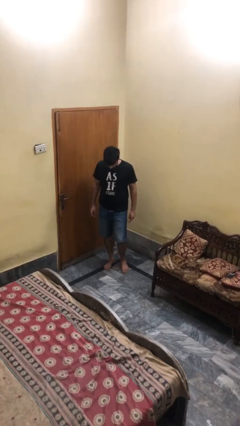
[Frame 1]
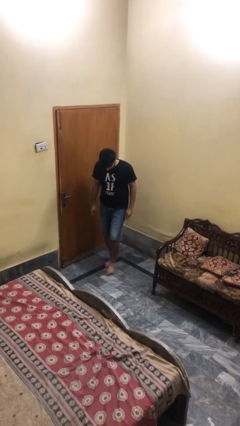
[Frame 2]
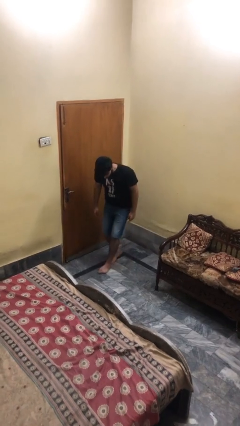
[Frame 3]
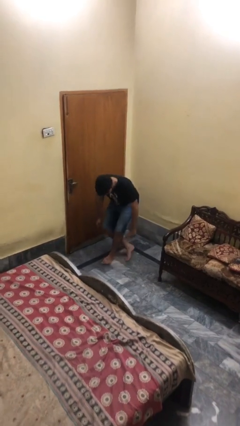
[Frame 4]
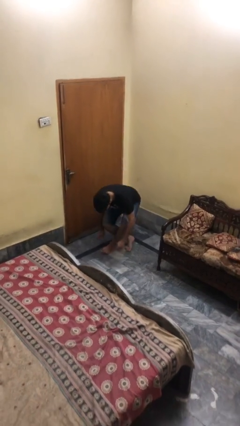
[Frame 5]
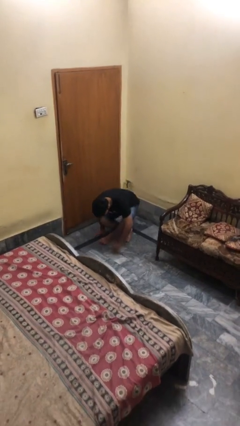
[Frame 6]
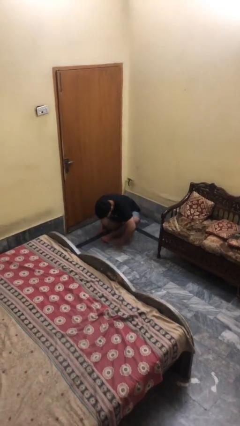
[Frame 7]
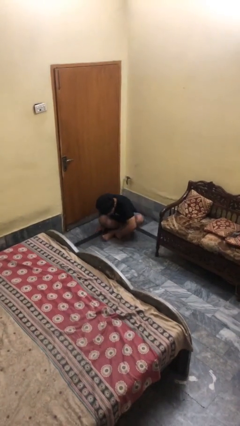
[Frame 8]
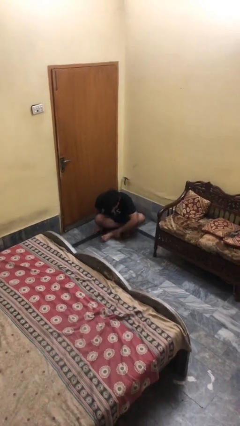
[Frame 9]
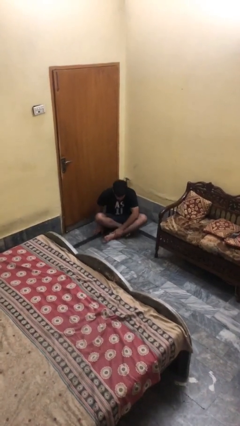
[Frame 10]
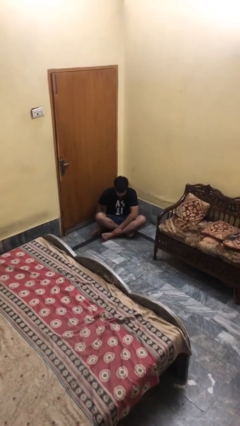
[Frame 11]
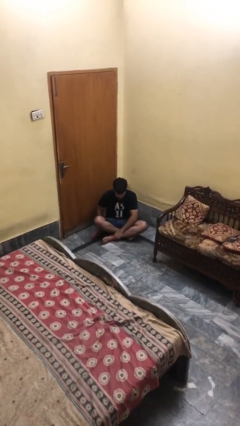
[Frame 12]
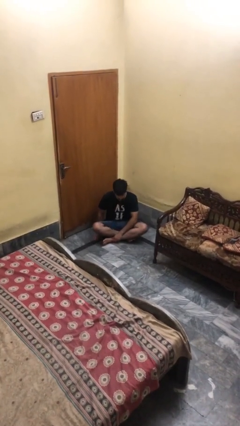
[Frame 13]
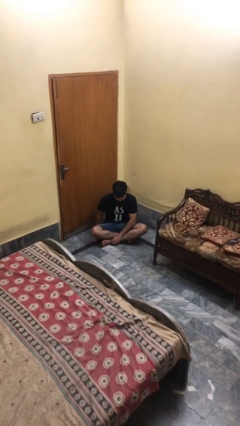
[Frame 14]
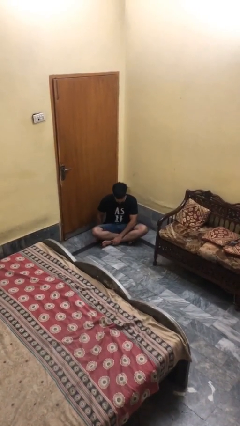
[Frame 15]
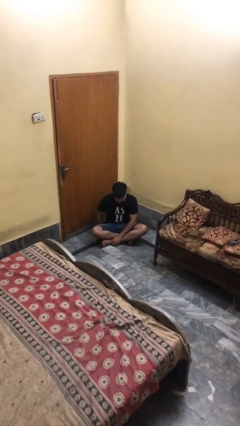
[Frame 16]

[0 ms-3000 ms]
person sits crisscross

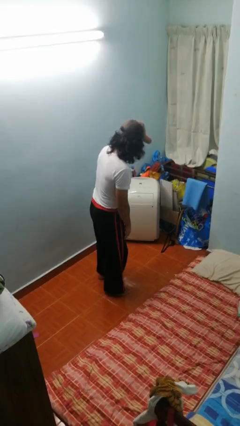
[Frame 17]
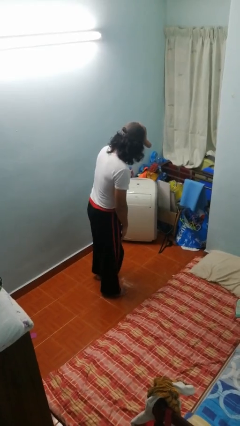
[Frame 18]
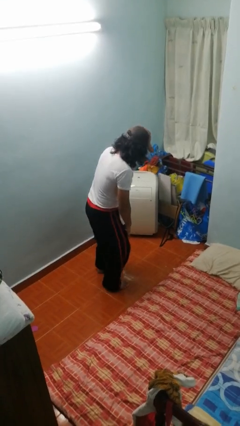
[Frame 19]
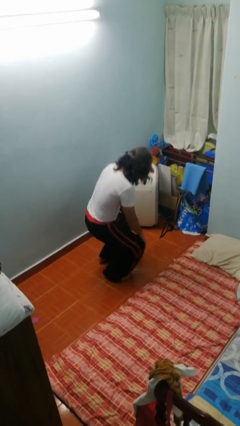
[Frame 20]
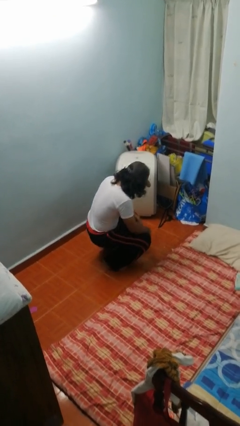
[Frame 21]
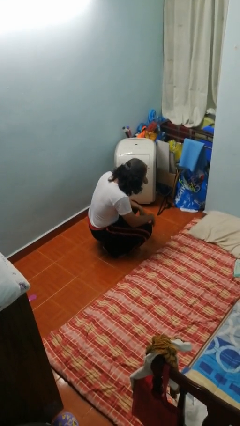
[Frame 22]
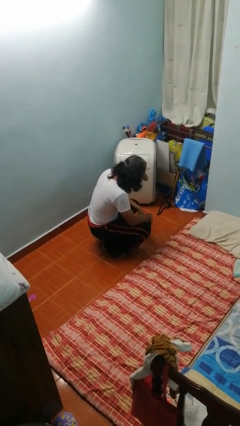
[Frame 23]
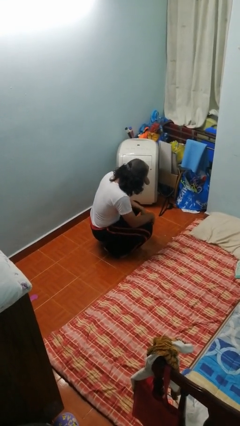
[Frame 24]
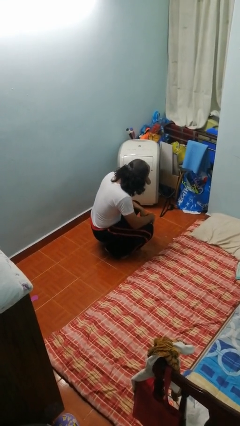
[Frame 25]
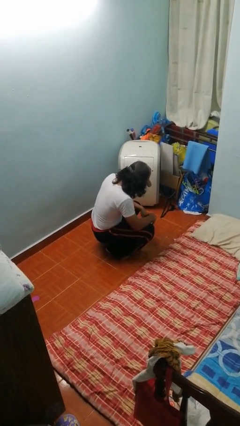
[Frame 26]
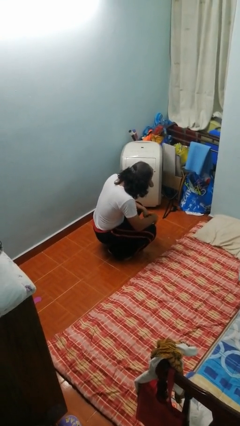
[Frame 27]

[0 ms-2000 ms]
person squats

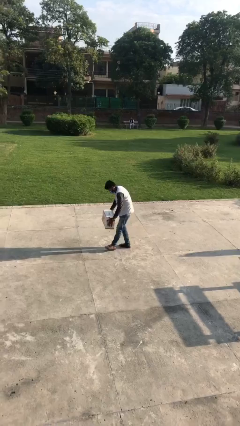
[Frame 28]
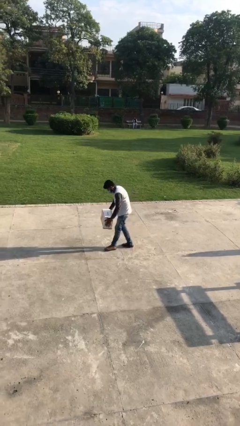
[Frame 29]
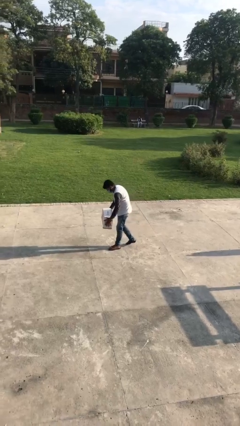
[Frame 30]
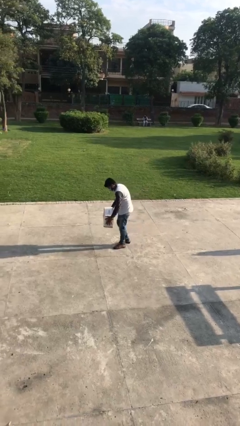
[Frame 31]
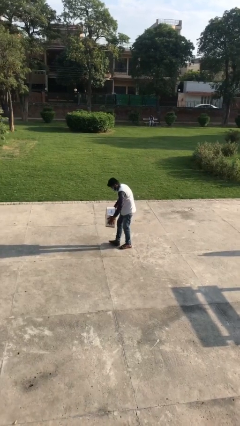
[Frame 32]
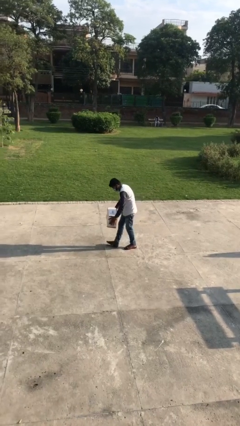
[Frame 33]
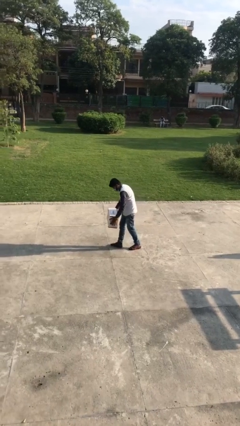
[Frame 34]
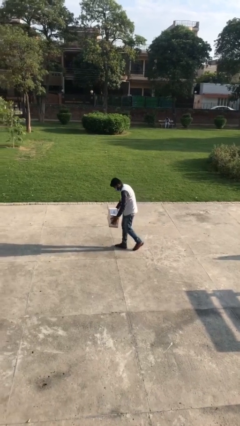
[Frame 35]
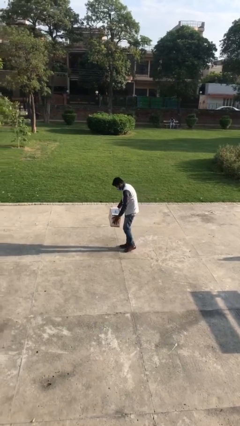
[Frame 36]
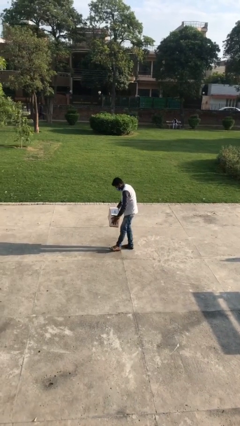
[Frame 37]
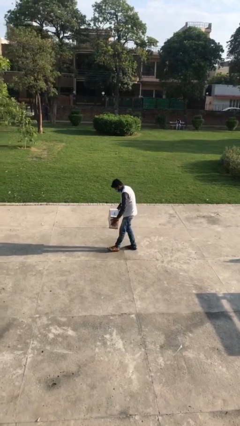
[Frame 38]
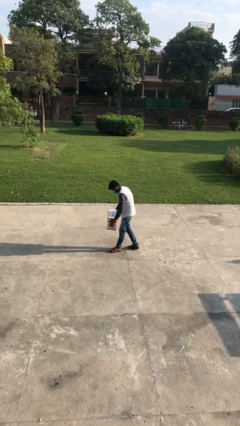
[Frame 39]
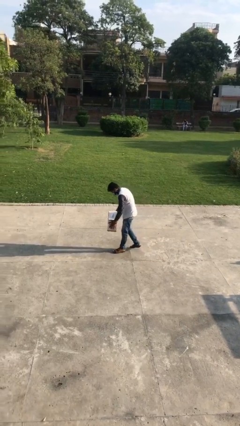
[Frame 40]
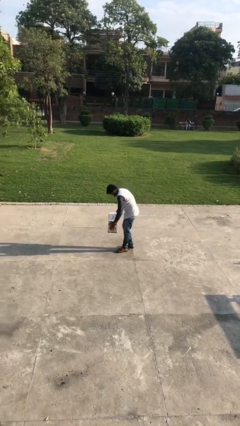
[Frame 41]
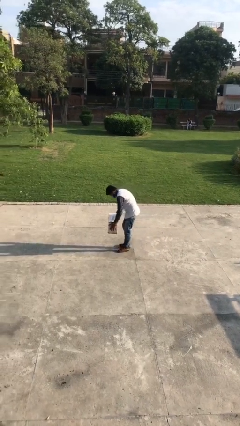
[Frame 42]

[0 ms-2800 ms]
person carries heavy object

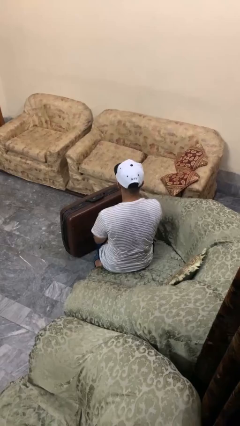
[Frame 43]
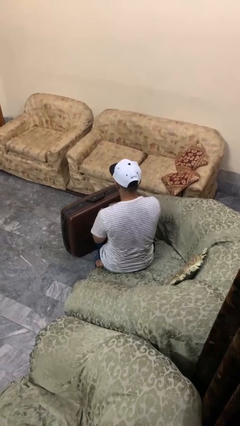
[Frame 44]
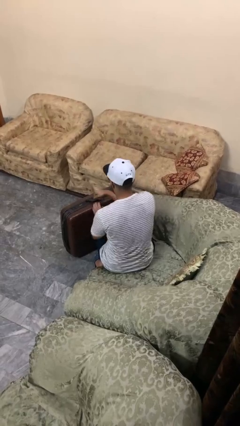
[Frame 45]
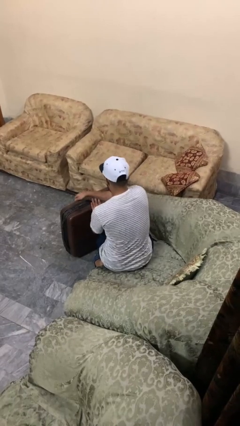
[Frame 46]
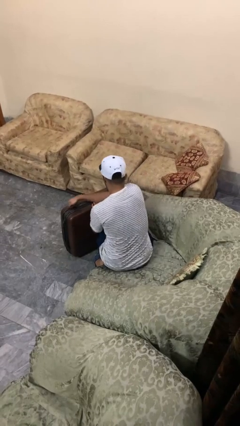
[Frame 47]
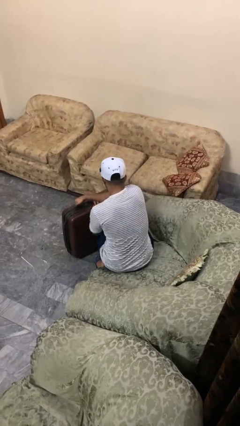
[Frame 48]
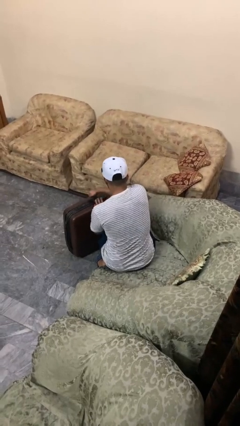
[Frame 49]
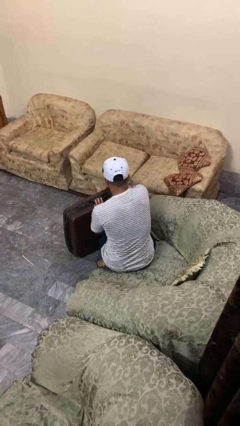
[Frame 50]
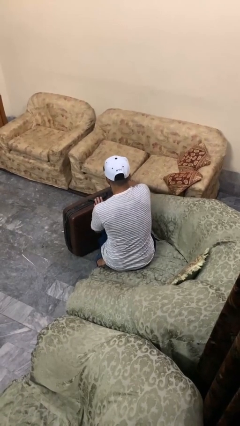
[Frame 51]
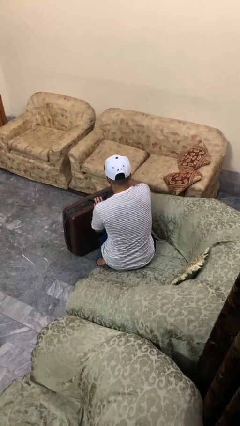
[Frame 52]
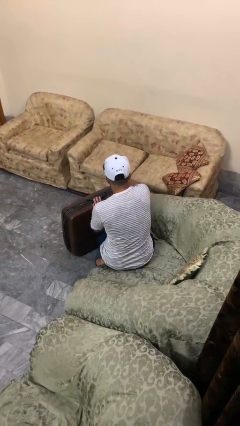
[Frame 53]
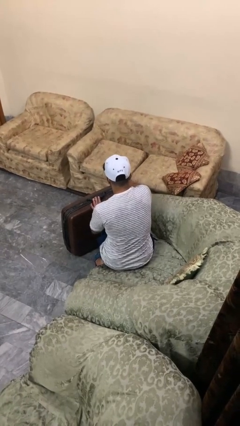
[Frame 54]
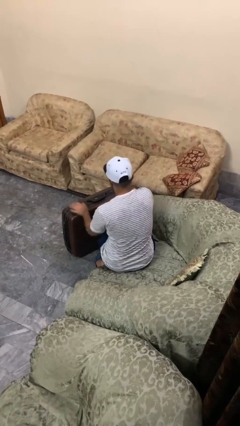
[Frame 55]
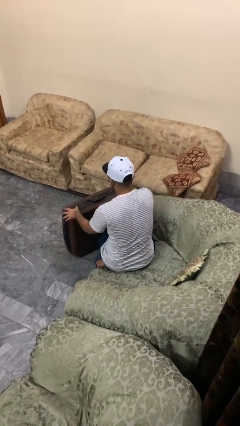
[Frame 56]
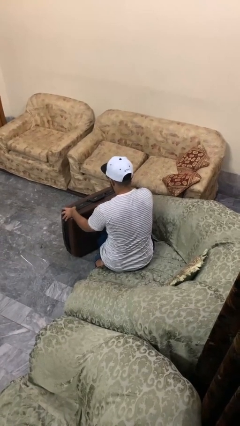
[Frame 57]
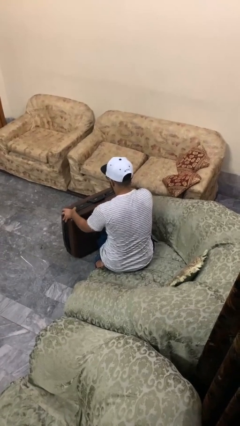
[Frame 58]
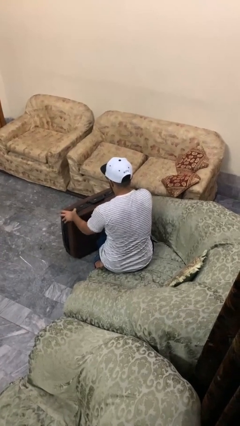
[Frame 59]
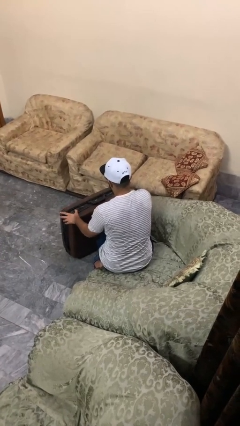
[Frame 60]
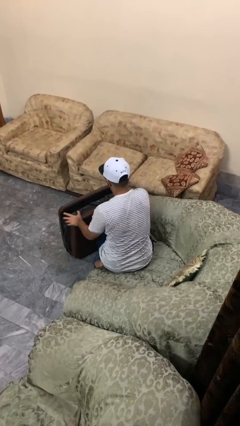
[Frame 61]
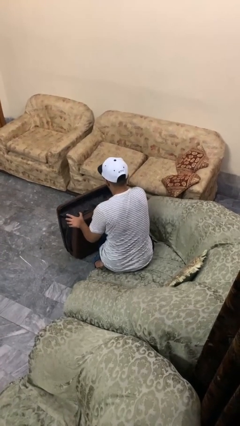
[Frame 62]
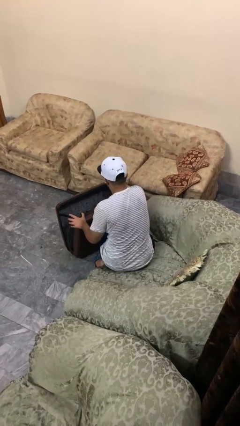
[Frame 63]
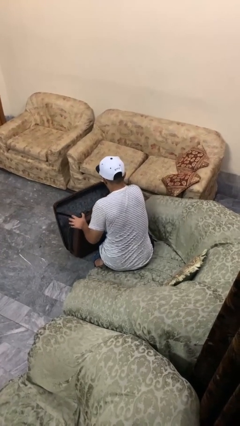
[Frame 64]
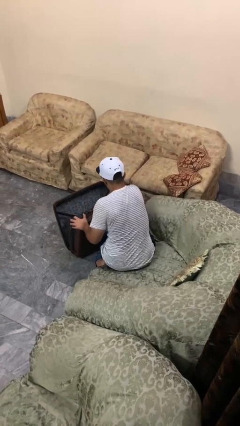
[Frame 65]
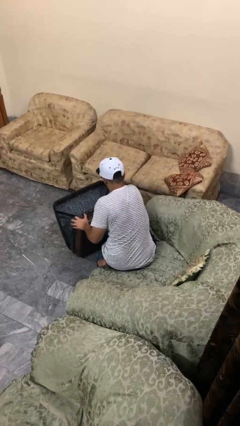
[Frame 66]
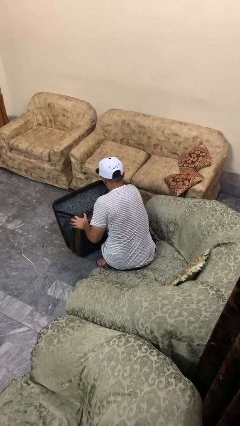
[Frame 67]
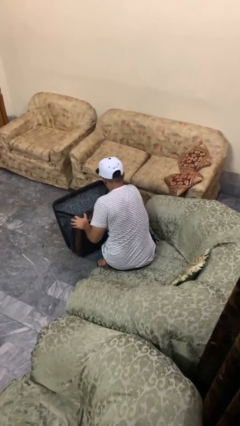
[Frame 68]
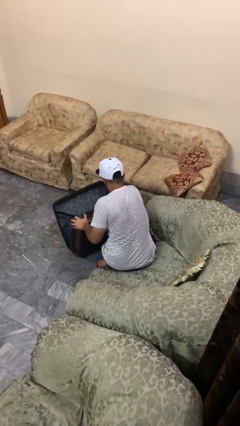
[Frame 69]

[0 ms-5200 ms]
person opens suitcase

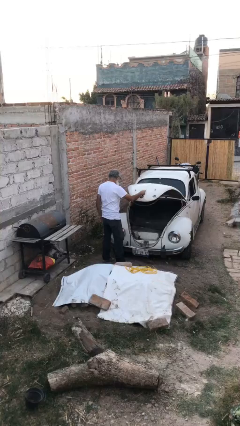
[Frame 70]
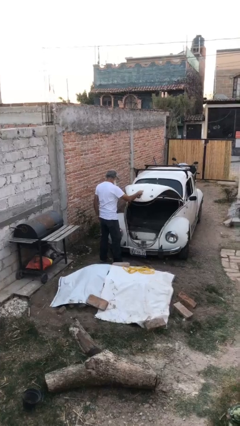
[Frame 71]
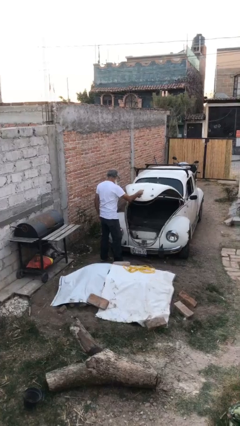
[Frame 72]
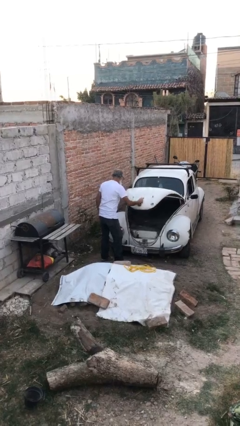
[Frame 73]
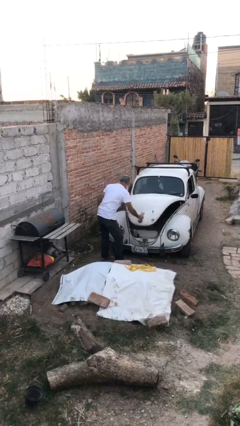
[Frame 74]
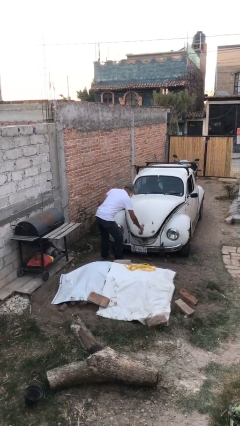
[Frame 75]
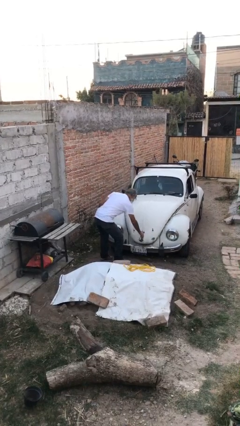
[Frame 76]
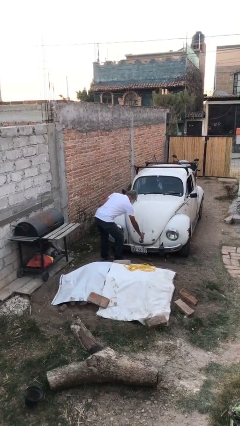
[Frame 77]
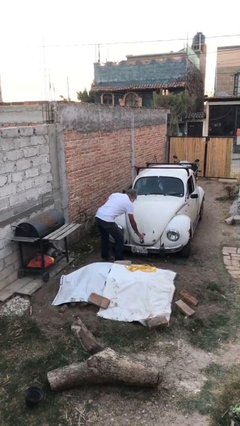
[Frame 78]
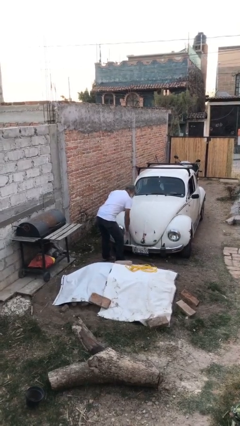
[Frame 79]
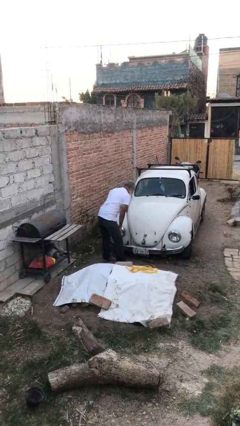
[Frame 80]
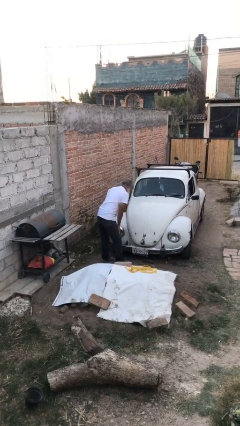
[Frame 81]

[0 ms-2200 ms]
person closes car trunk

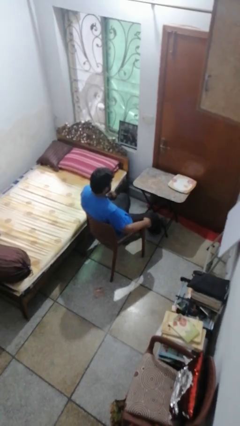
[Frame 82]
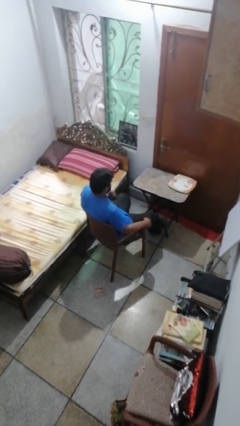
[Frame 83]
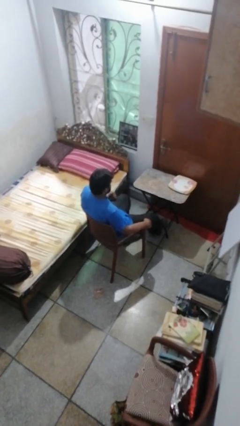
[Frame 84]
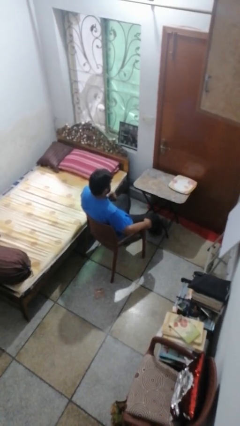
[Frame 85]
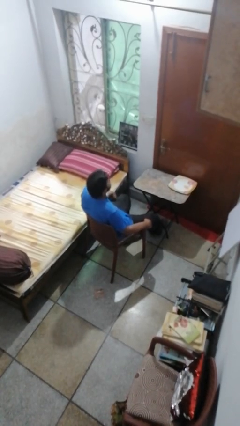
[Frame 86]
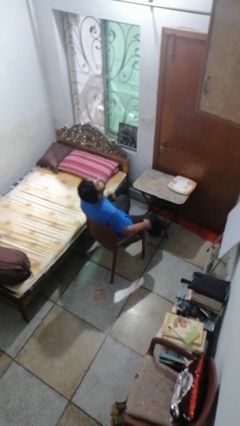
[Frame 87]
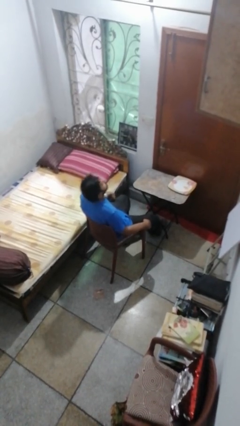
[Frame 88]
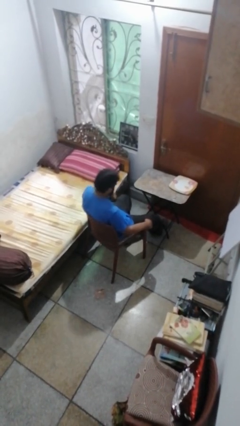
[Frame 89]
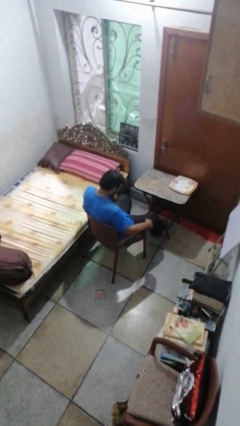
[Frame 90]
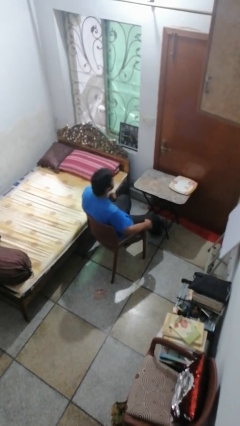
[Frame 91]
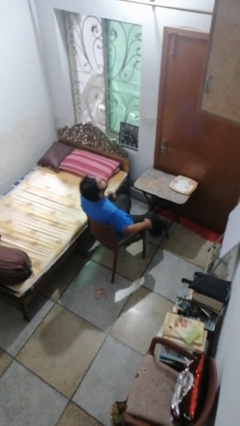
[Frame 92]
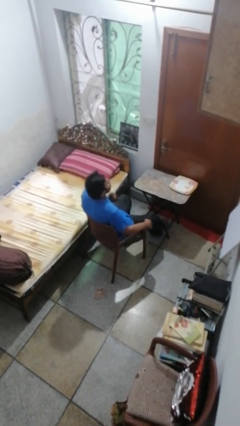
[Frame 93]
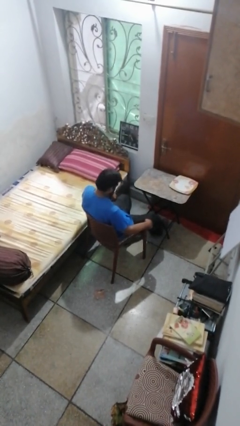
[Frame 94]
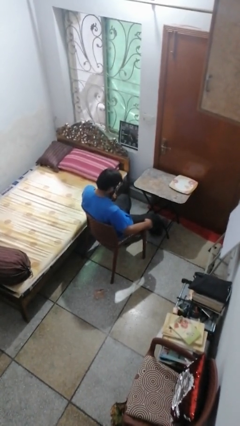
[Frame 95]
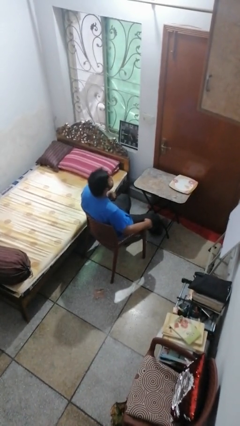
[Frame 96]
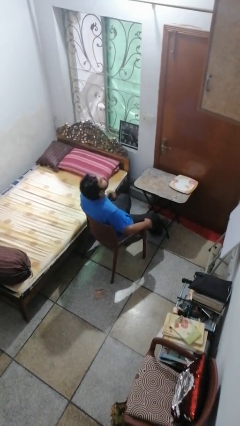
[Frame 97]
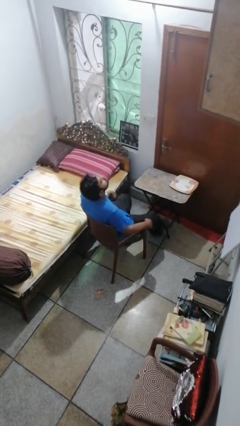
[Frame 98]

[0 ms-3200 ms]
person nods head
